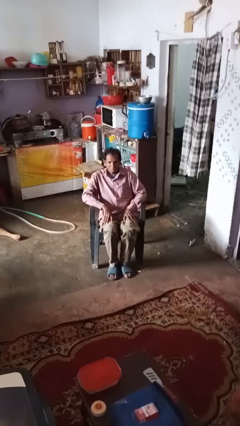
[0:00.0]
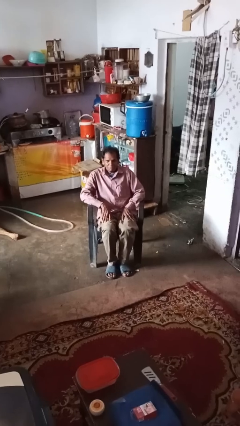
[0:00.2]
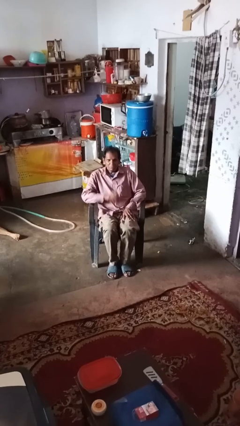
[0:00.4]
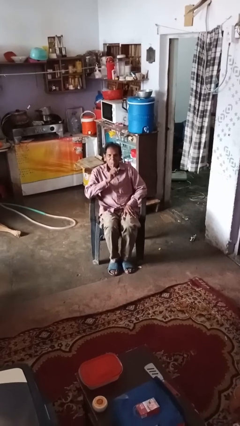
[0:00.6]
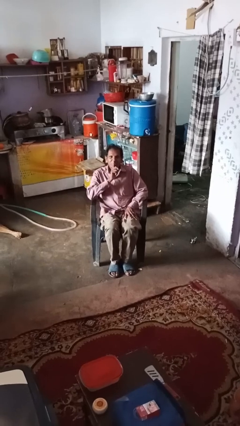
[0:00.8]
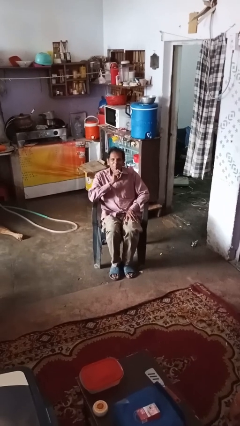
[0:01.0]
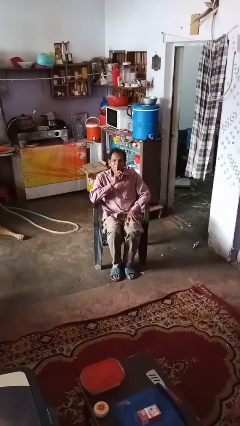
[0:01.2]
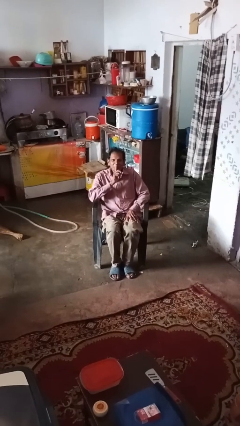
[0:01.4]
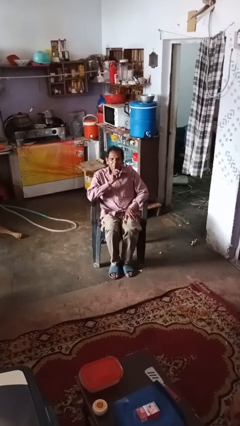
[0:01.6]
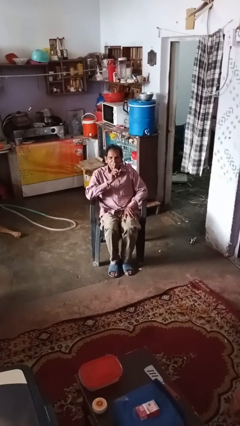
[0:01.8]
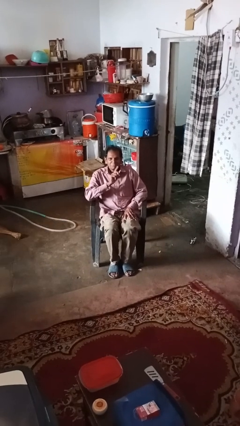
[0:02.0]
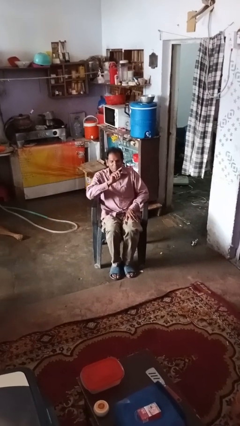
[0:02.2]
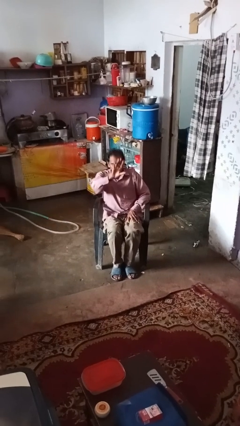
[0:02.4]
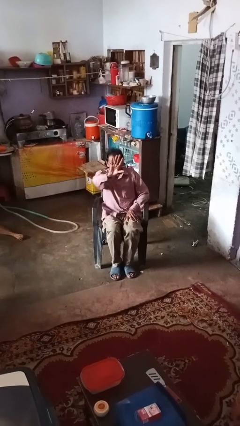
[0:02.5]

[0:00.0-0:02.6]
person gestures be quiet

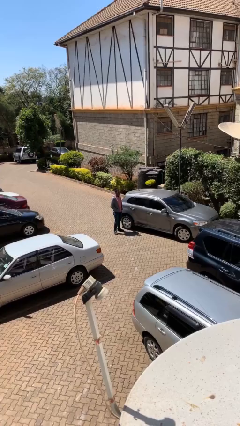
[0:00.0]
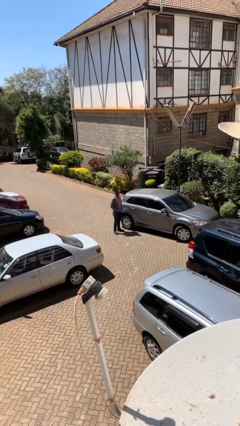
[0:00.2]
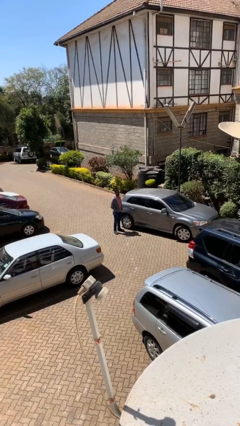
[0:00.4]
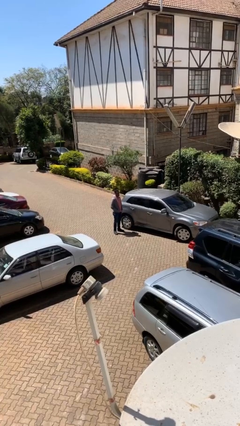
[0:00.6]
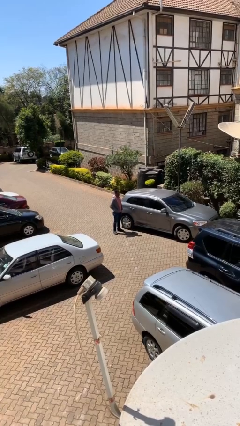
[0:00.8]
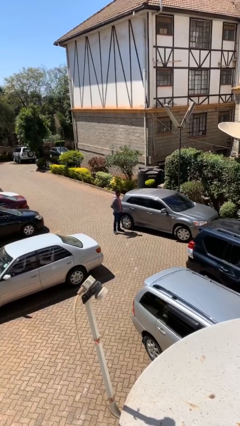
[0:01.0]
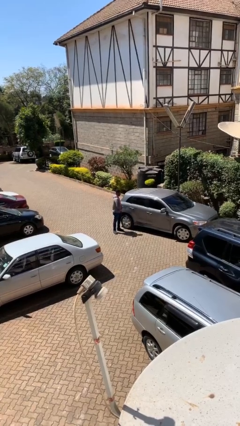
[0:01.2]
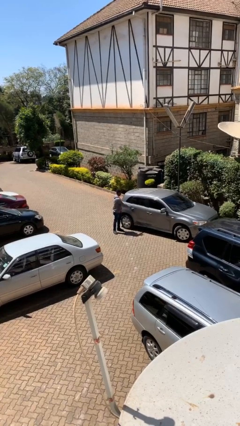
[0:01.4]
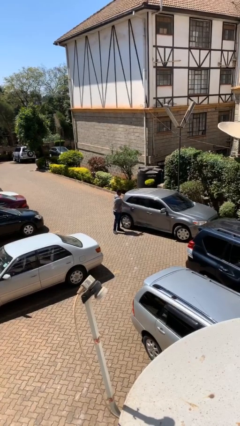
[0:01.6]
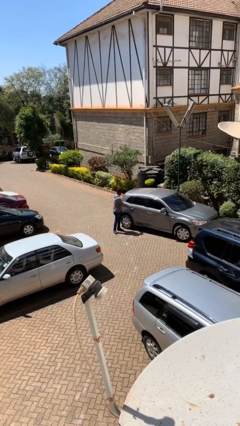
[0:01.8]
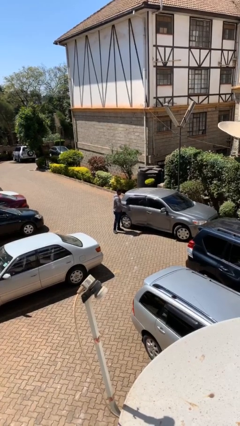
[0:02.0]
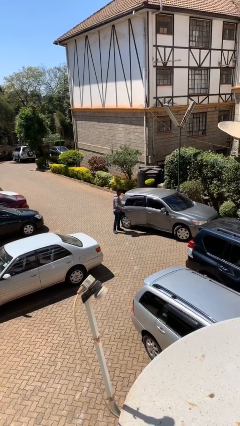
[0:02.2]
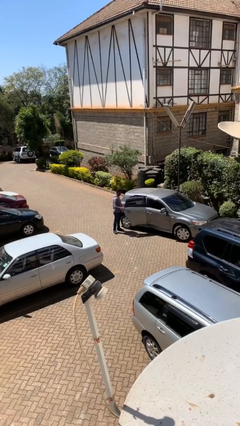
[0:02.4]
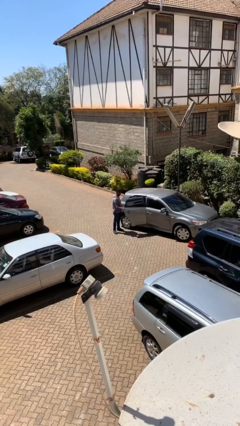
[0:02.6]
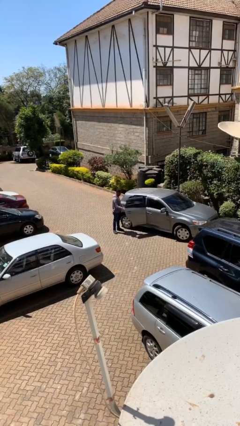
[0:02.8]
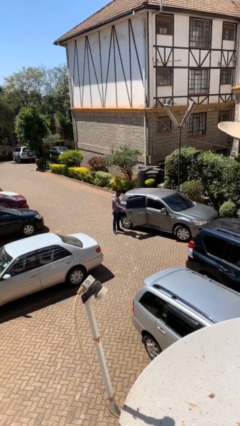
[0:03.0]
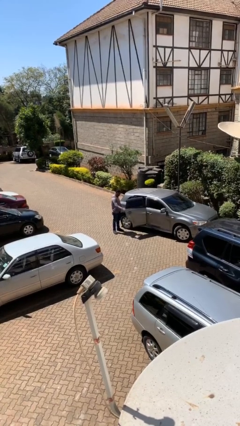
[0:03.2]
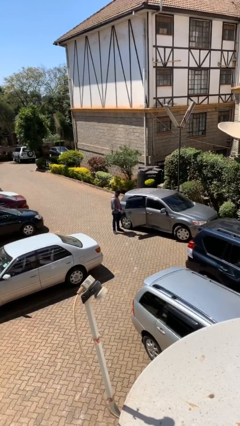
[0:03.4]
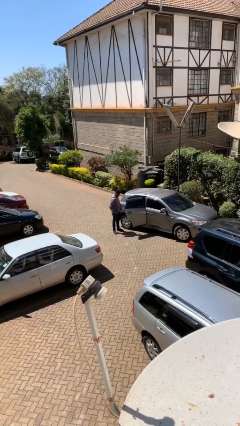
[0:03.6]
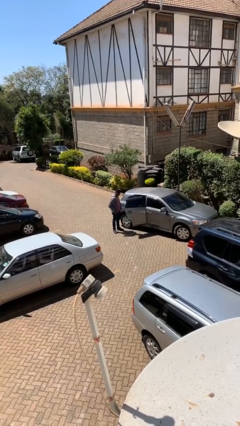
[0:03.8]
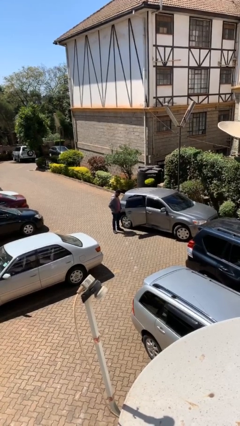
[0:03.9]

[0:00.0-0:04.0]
person opens car door

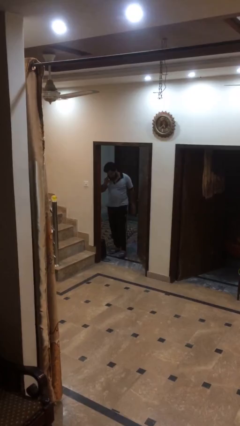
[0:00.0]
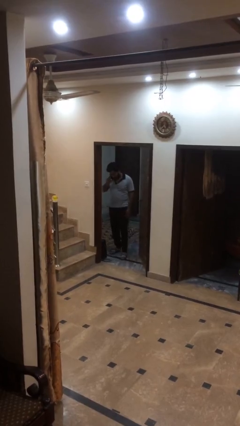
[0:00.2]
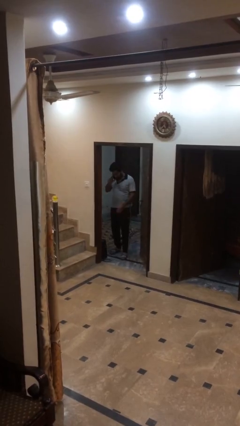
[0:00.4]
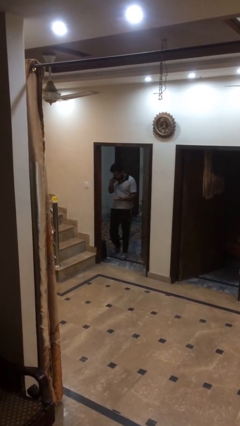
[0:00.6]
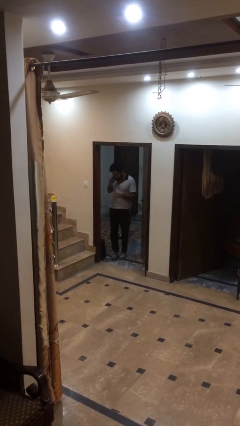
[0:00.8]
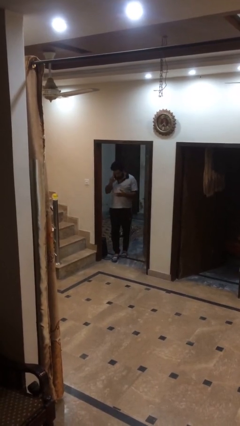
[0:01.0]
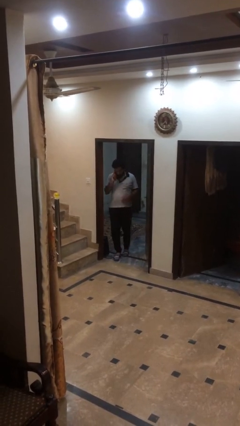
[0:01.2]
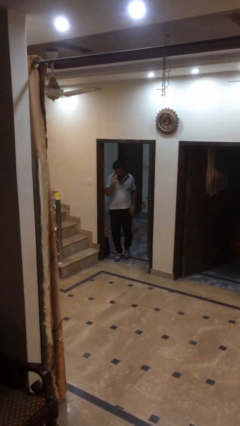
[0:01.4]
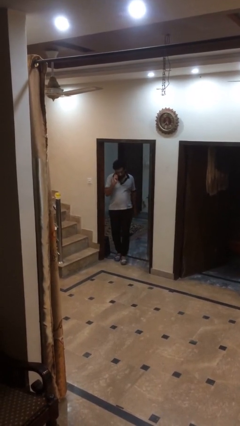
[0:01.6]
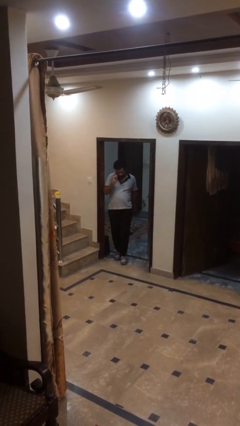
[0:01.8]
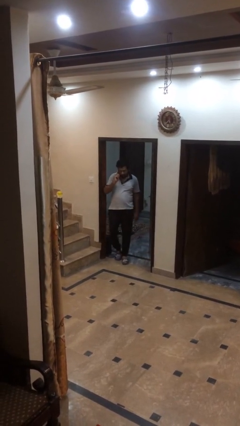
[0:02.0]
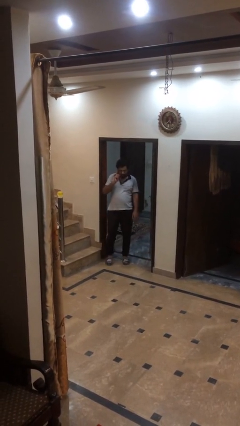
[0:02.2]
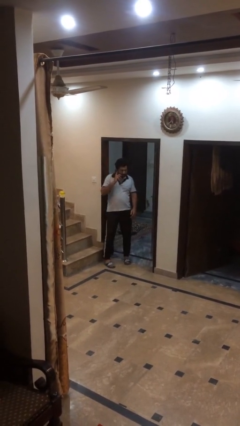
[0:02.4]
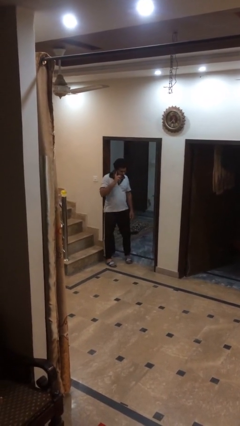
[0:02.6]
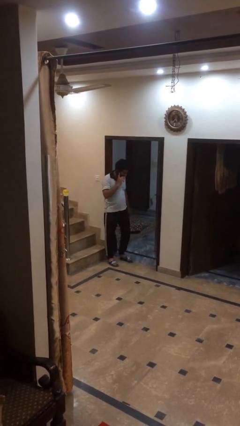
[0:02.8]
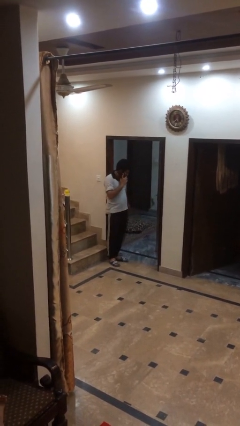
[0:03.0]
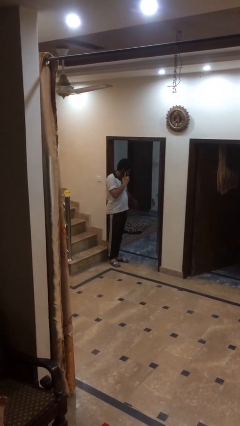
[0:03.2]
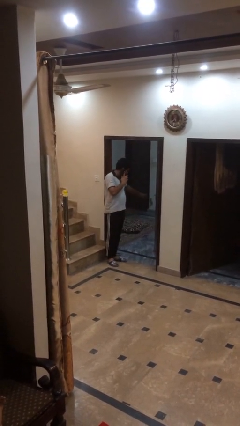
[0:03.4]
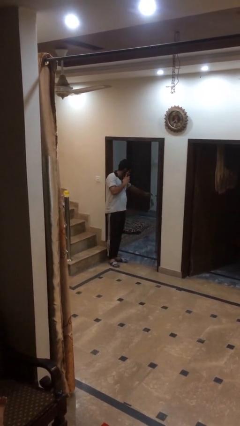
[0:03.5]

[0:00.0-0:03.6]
person enters scene through structure

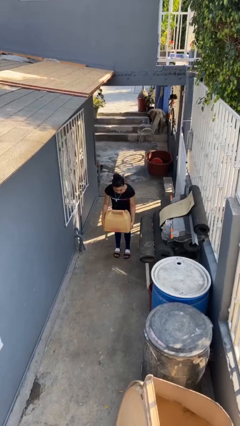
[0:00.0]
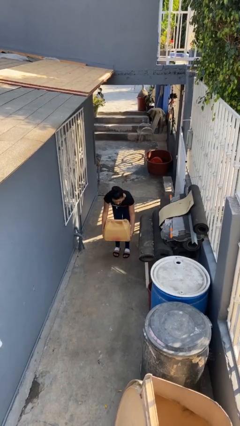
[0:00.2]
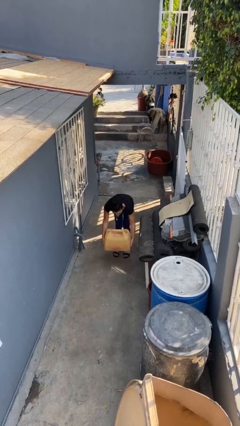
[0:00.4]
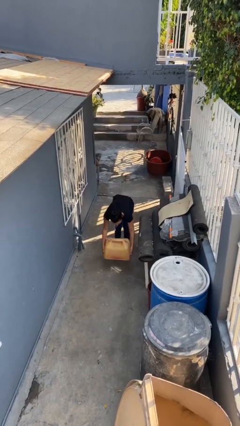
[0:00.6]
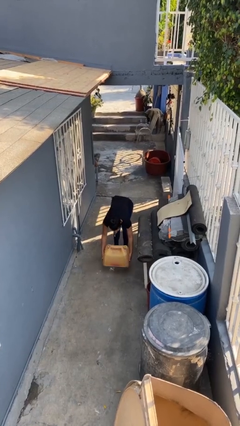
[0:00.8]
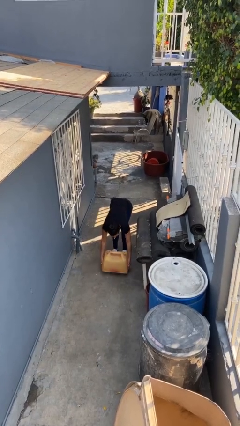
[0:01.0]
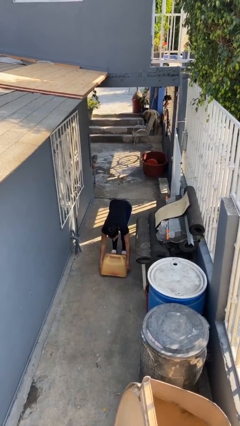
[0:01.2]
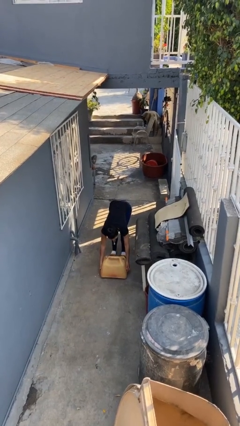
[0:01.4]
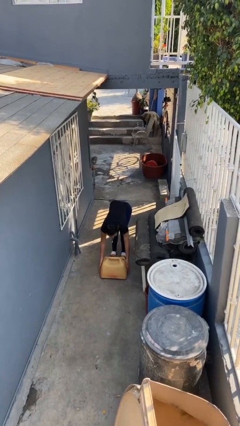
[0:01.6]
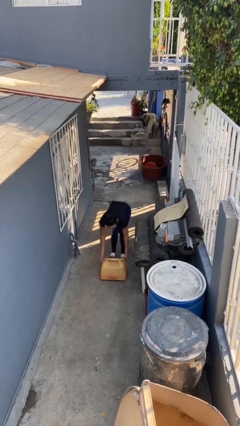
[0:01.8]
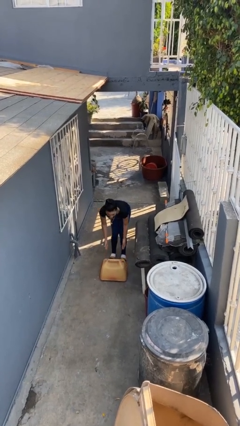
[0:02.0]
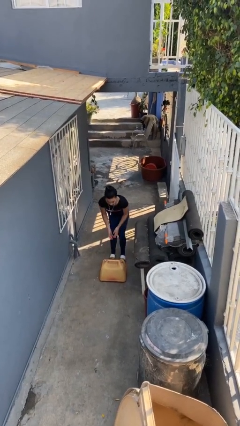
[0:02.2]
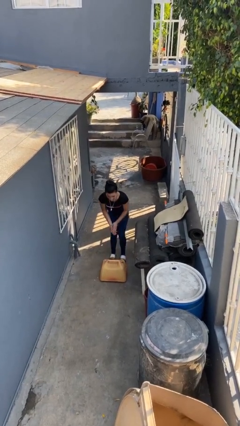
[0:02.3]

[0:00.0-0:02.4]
person puts down object on floor

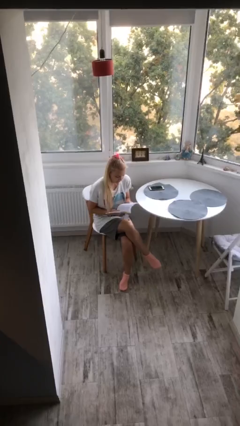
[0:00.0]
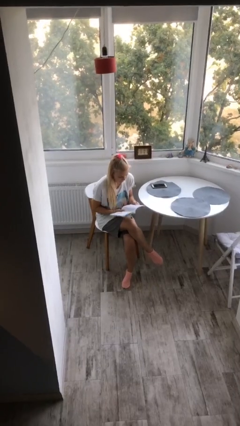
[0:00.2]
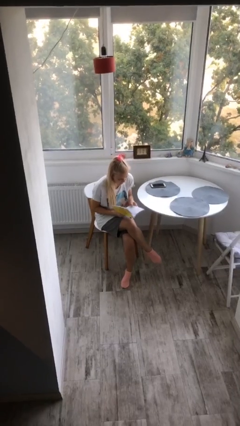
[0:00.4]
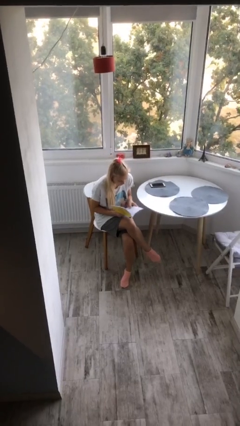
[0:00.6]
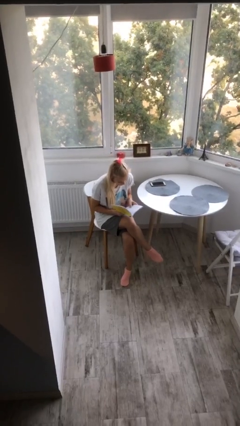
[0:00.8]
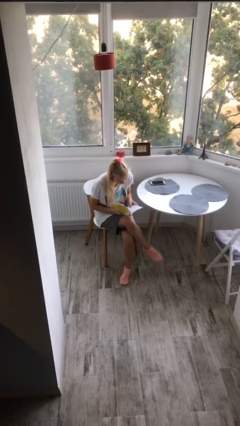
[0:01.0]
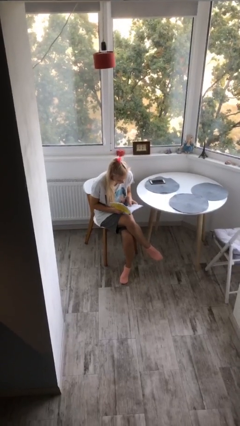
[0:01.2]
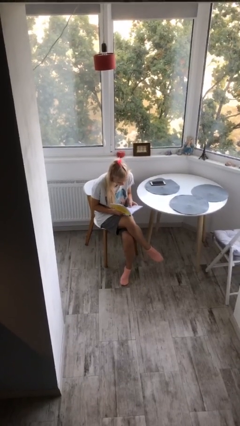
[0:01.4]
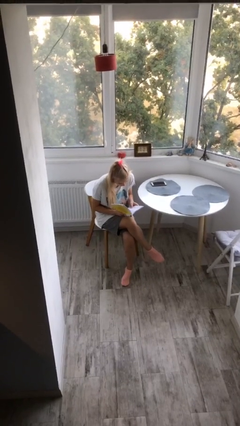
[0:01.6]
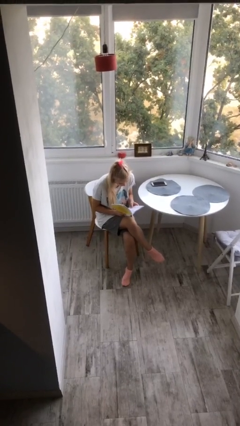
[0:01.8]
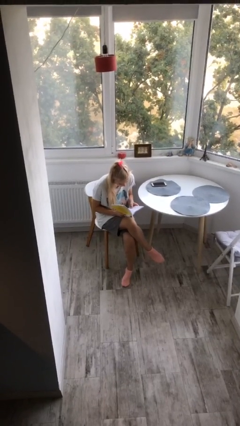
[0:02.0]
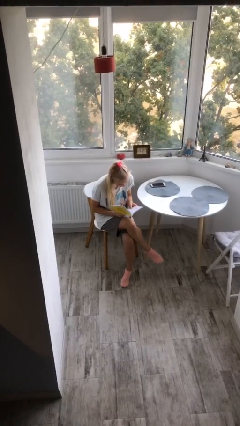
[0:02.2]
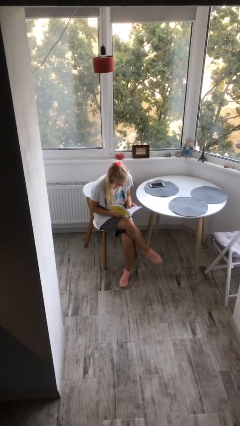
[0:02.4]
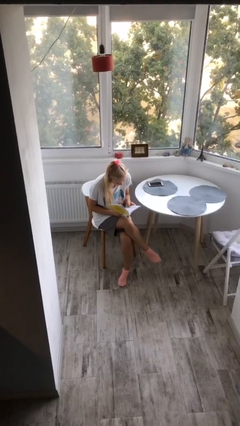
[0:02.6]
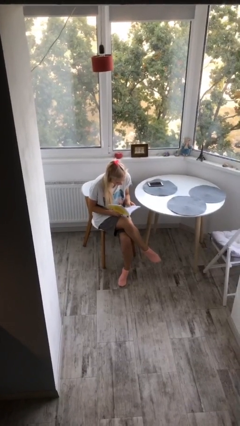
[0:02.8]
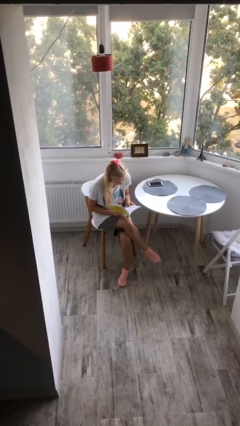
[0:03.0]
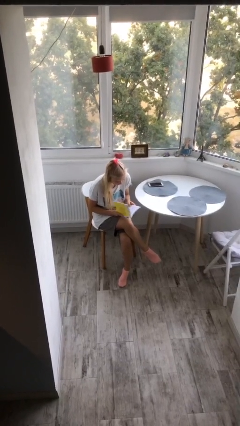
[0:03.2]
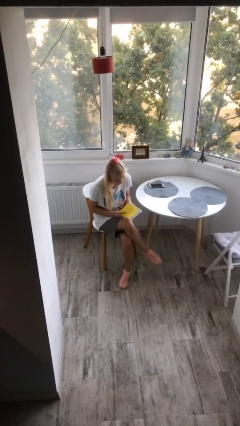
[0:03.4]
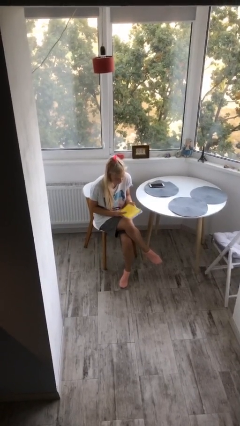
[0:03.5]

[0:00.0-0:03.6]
person reads document

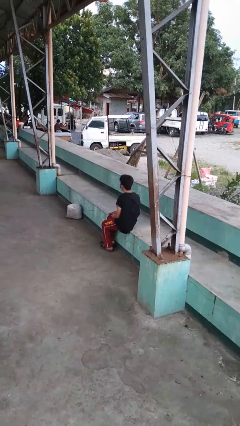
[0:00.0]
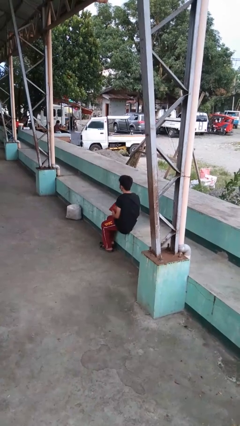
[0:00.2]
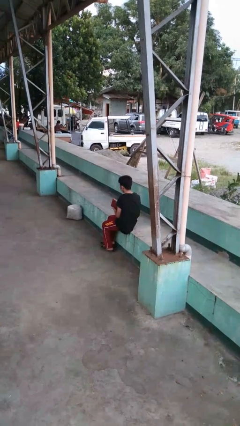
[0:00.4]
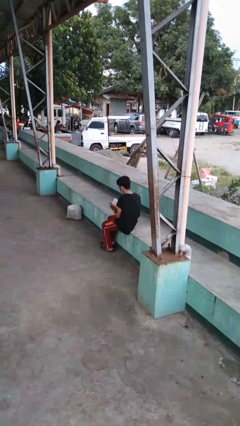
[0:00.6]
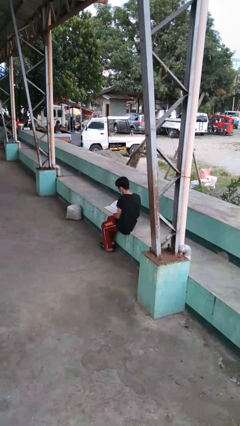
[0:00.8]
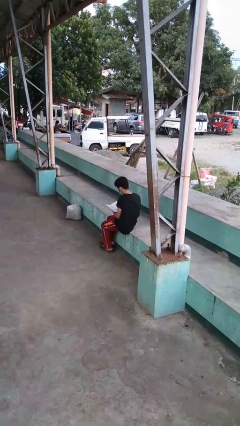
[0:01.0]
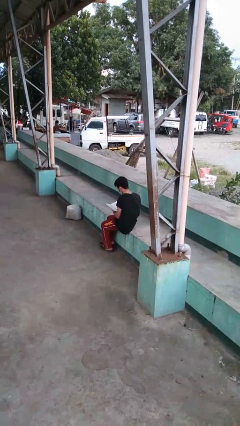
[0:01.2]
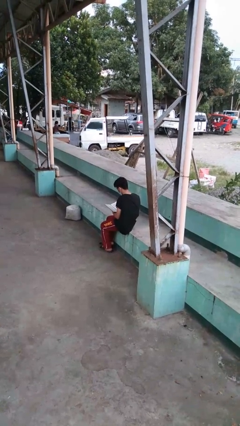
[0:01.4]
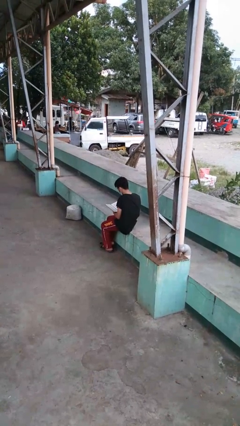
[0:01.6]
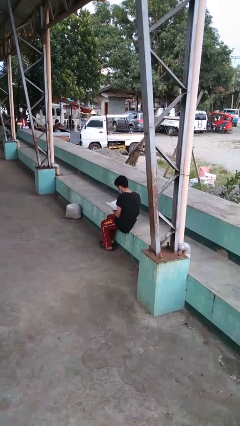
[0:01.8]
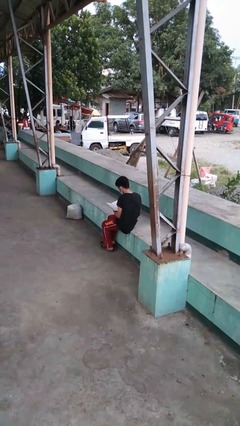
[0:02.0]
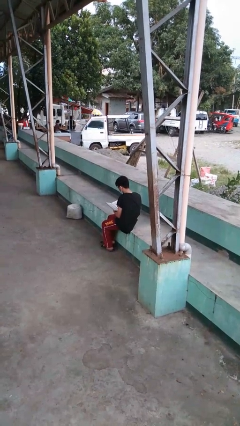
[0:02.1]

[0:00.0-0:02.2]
person reads book
